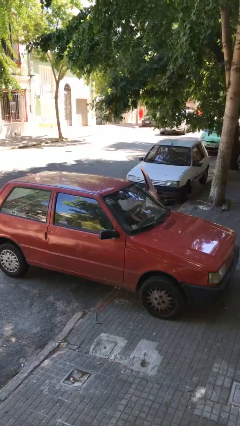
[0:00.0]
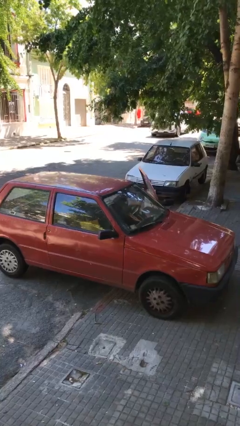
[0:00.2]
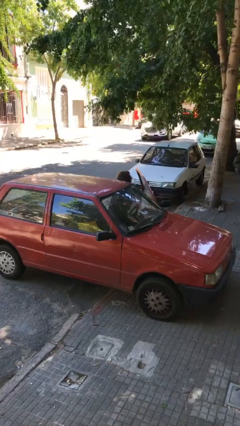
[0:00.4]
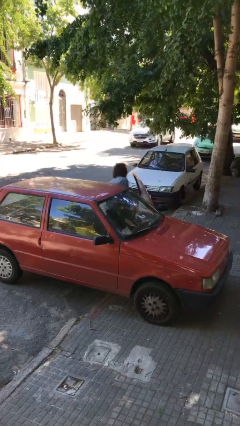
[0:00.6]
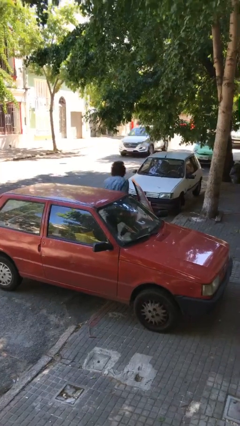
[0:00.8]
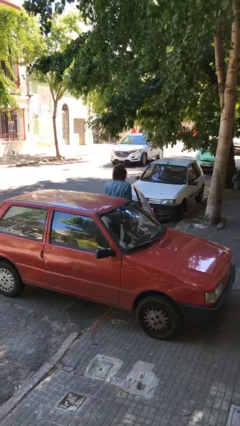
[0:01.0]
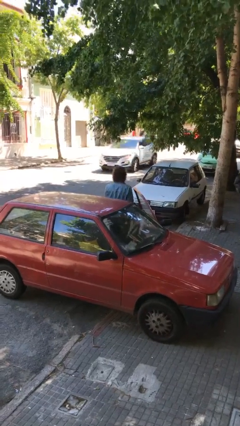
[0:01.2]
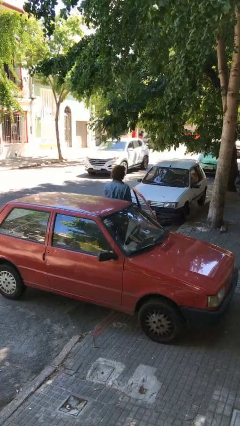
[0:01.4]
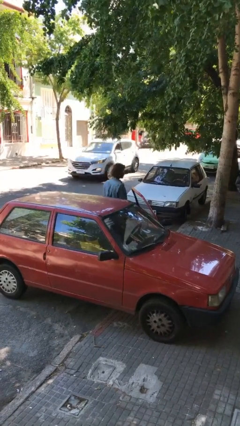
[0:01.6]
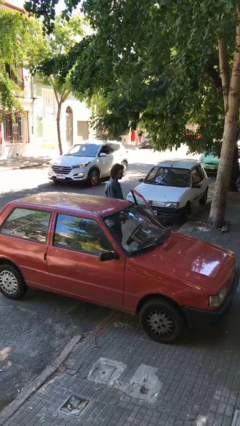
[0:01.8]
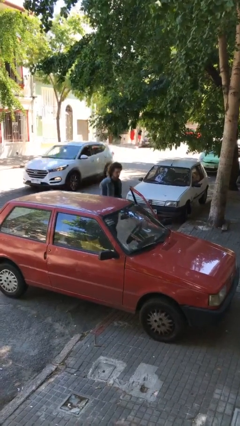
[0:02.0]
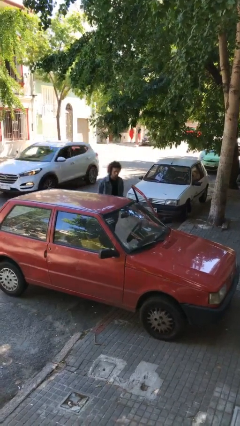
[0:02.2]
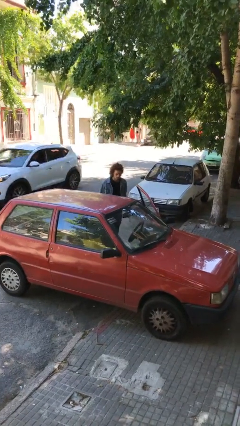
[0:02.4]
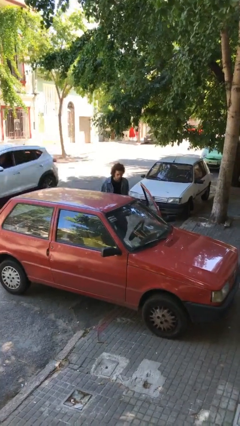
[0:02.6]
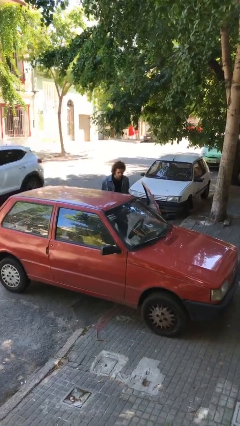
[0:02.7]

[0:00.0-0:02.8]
person exits car

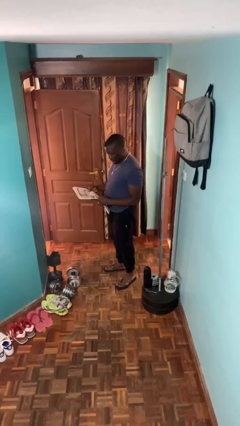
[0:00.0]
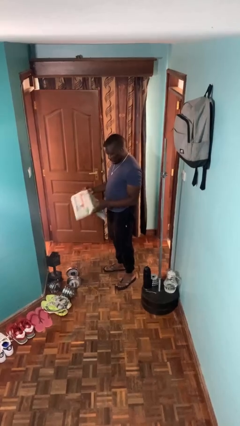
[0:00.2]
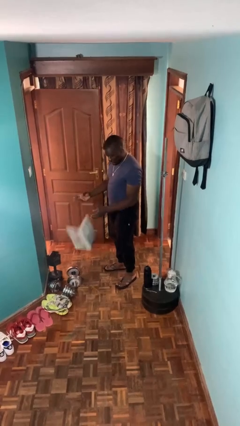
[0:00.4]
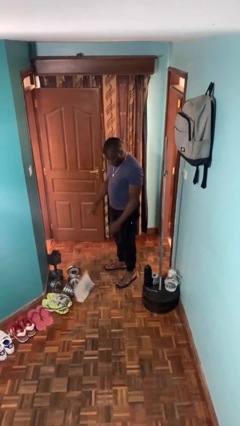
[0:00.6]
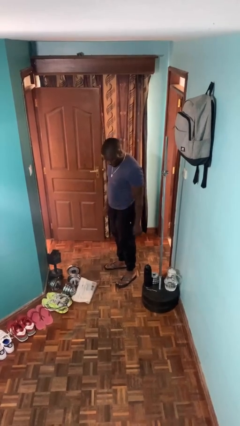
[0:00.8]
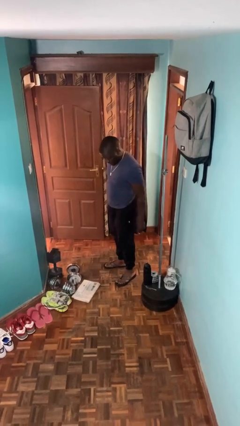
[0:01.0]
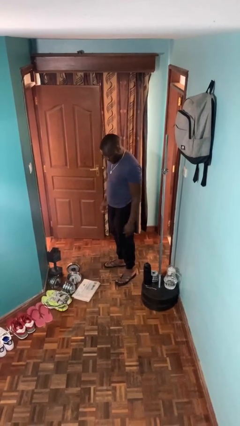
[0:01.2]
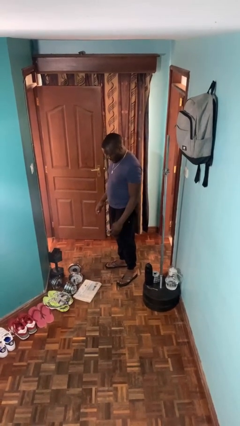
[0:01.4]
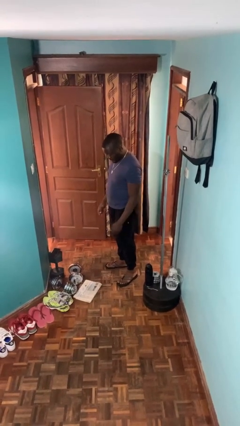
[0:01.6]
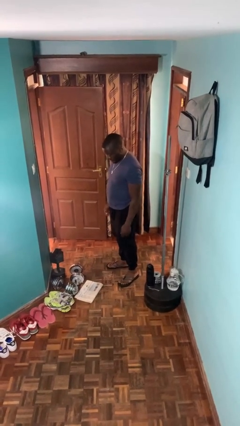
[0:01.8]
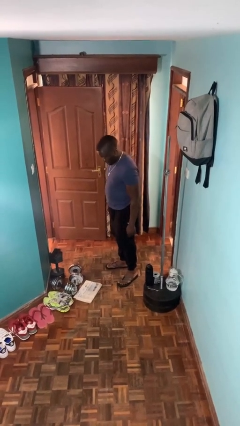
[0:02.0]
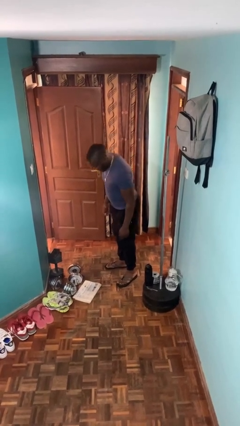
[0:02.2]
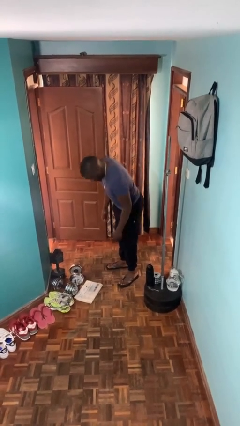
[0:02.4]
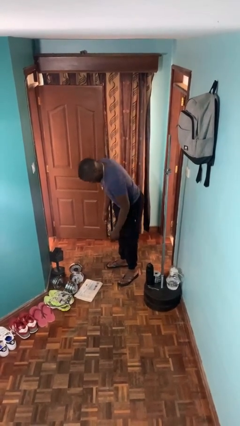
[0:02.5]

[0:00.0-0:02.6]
person drops object

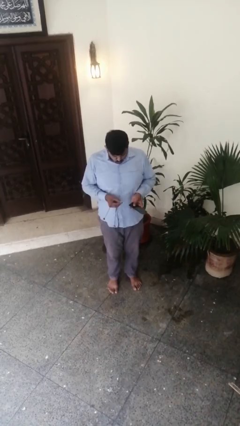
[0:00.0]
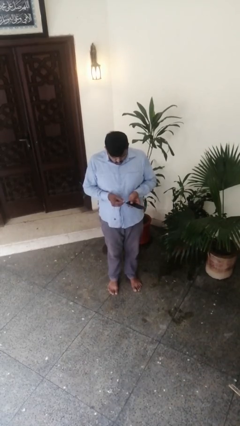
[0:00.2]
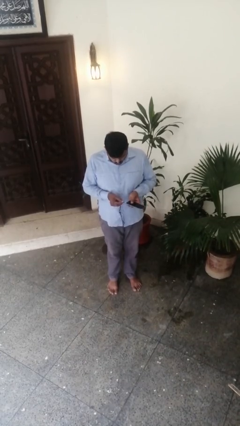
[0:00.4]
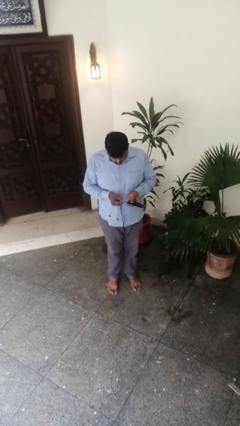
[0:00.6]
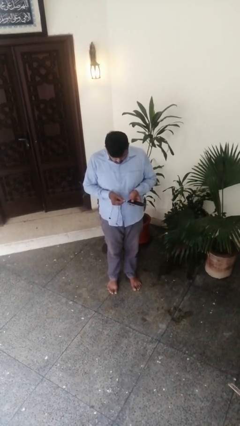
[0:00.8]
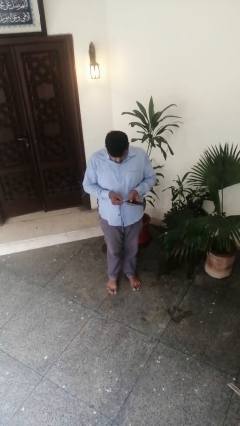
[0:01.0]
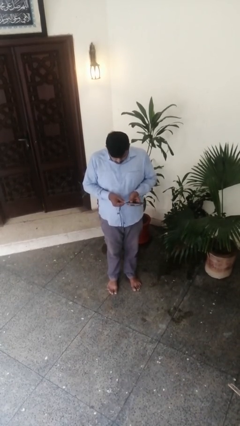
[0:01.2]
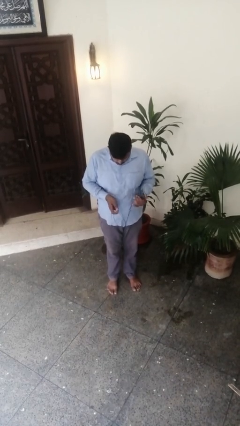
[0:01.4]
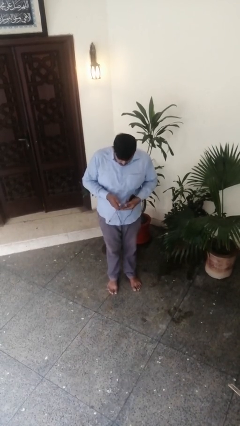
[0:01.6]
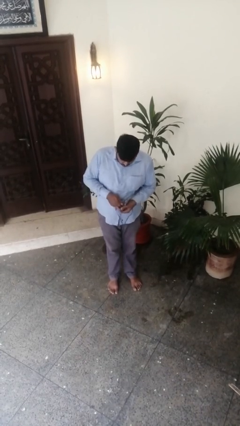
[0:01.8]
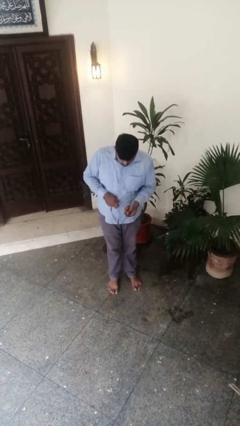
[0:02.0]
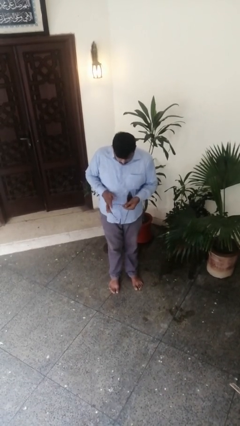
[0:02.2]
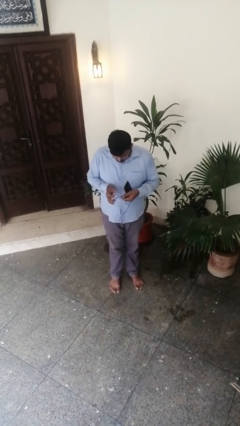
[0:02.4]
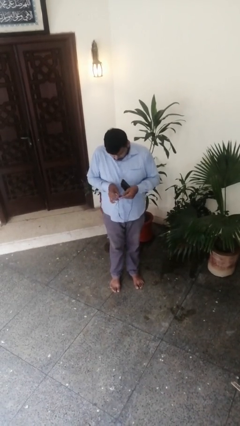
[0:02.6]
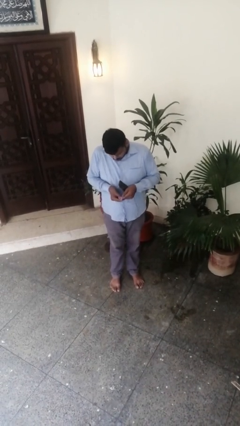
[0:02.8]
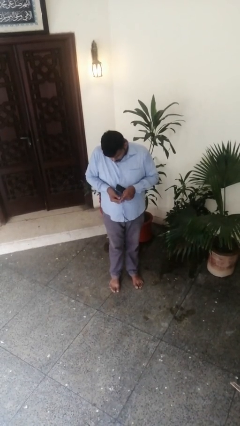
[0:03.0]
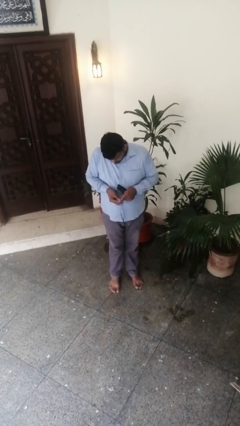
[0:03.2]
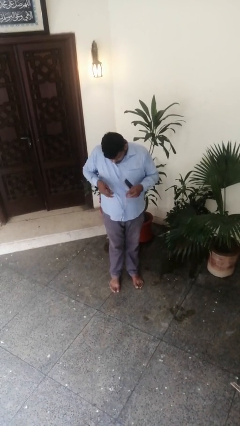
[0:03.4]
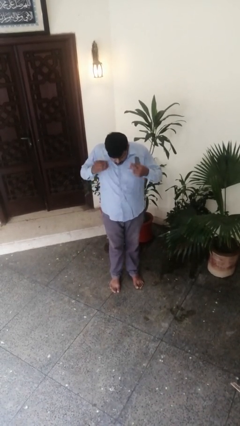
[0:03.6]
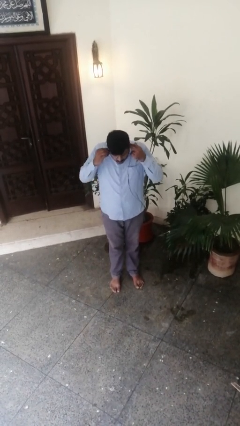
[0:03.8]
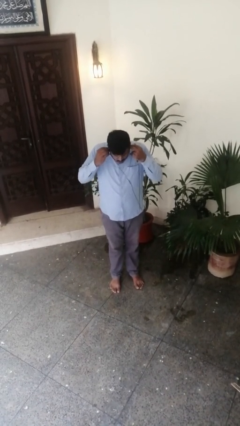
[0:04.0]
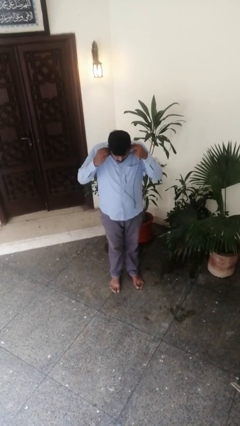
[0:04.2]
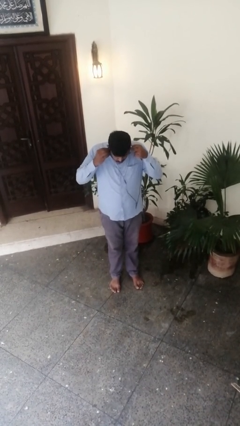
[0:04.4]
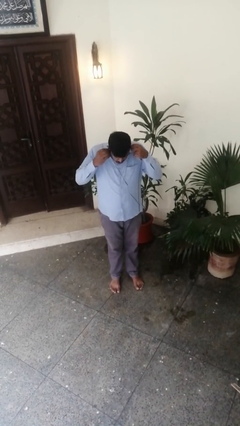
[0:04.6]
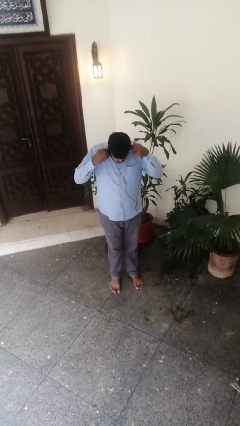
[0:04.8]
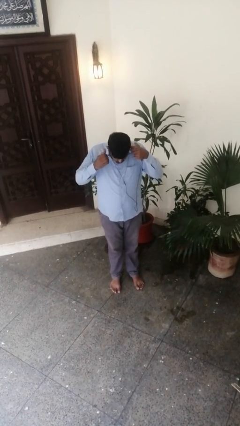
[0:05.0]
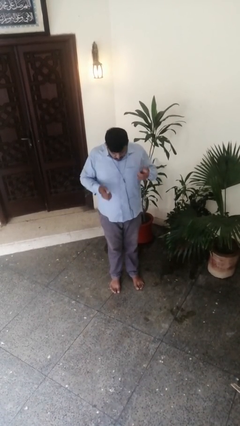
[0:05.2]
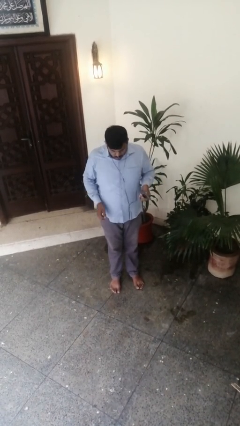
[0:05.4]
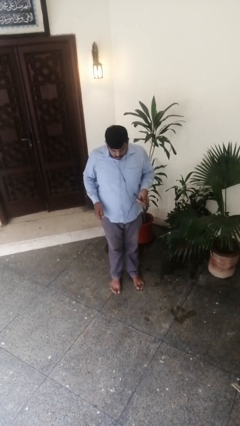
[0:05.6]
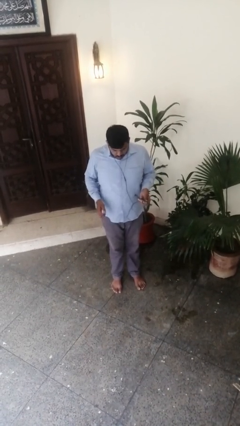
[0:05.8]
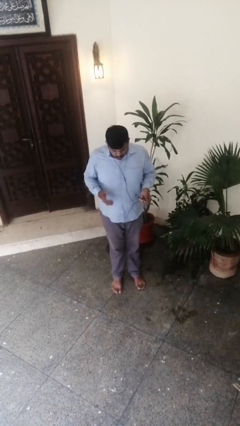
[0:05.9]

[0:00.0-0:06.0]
person puts on headphones

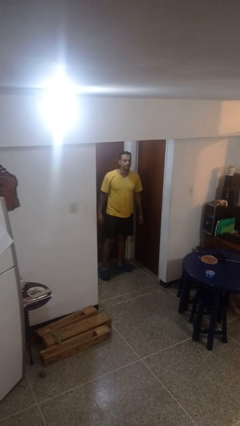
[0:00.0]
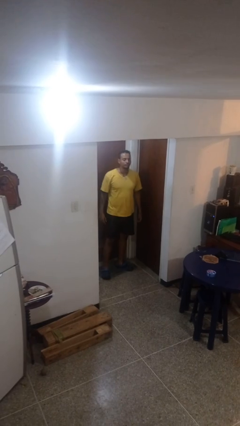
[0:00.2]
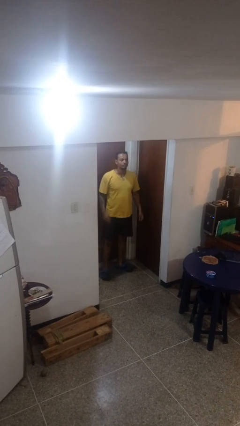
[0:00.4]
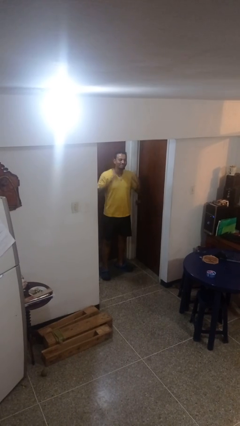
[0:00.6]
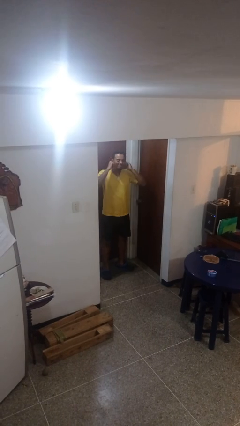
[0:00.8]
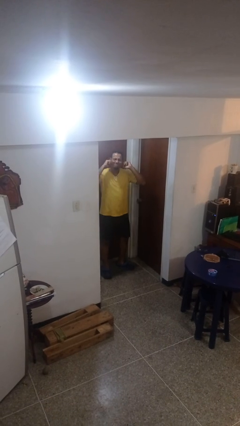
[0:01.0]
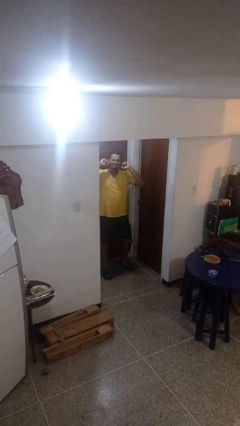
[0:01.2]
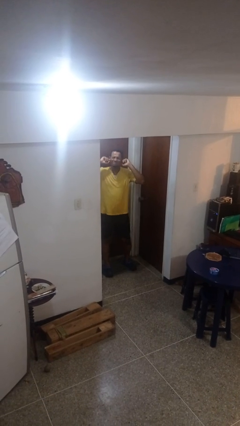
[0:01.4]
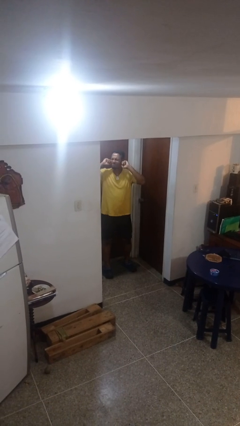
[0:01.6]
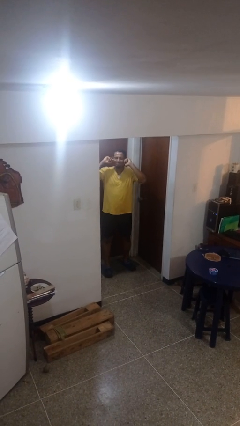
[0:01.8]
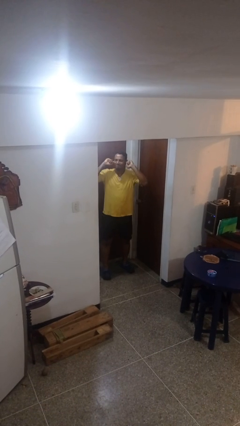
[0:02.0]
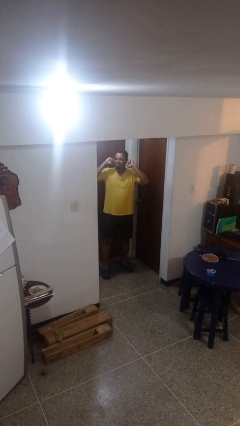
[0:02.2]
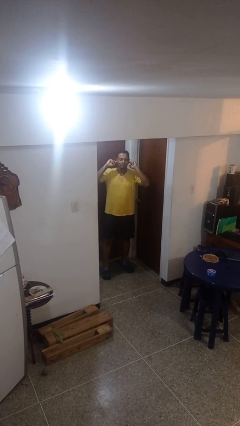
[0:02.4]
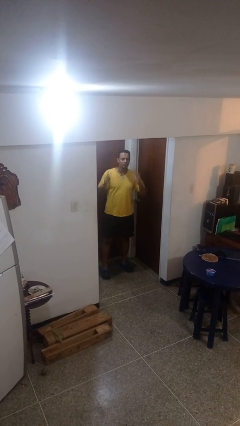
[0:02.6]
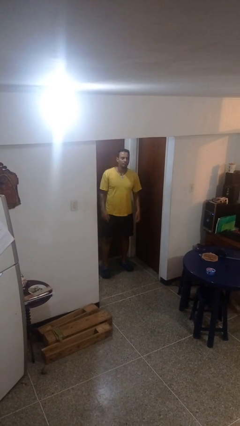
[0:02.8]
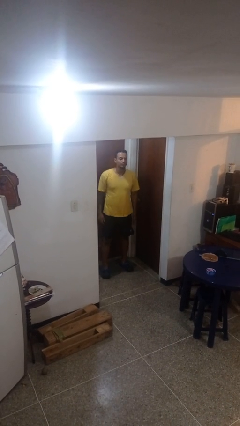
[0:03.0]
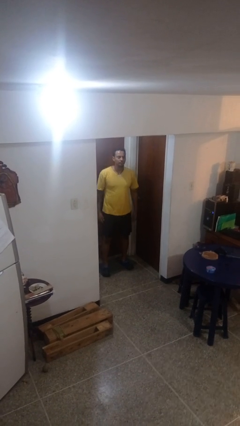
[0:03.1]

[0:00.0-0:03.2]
person puts fingers in ear

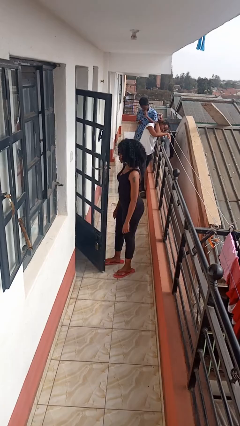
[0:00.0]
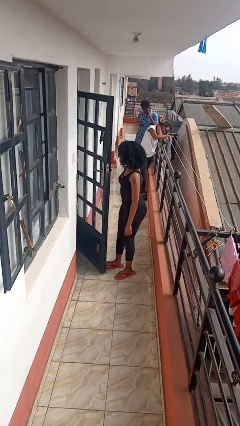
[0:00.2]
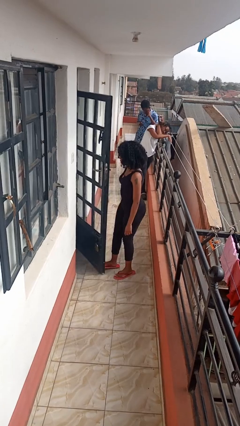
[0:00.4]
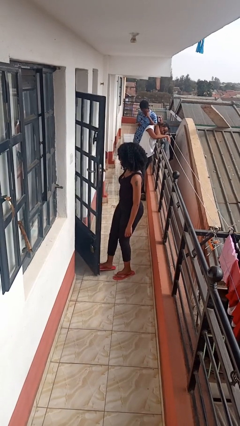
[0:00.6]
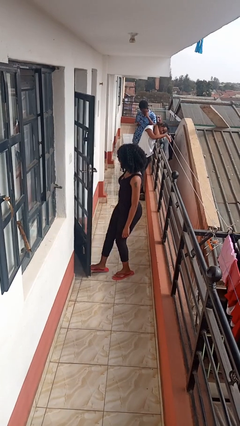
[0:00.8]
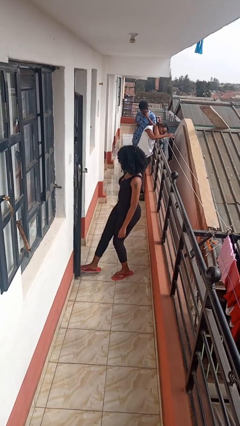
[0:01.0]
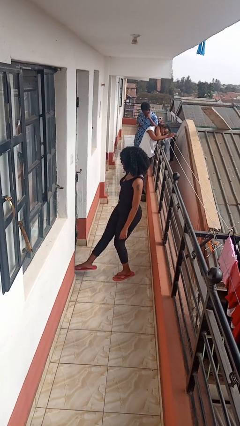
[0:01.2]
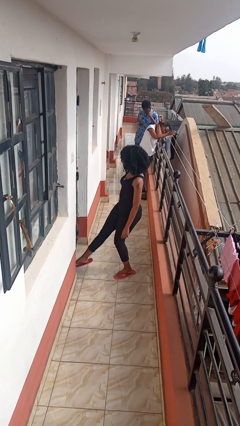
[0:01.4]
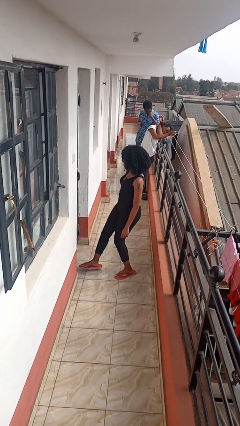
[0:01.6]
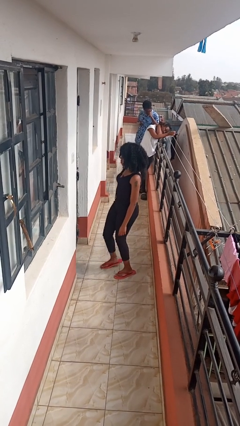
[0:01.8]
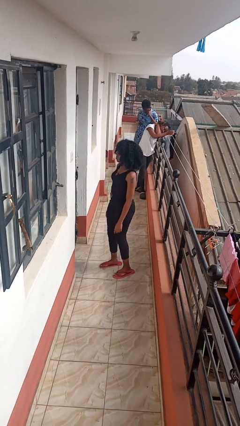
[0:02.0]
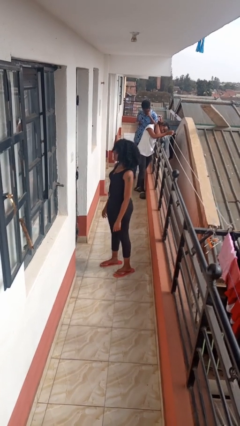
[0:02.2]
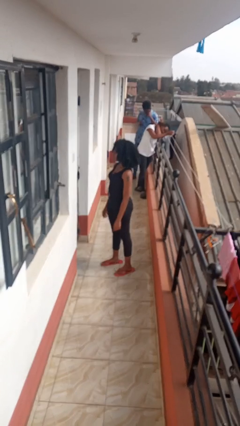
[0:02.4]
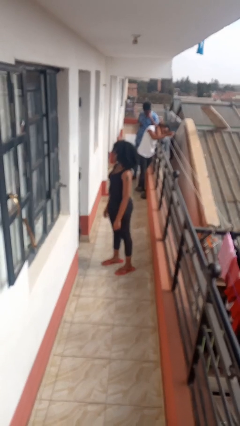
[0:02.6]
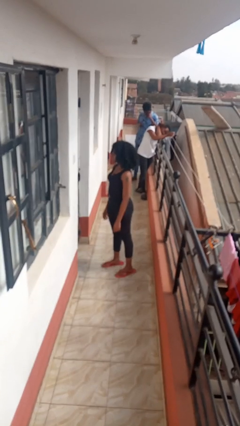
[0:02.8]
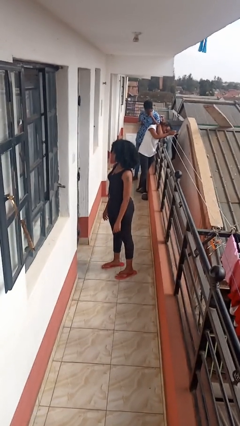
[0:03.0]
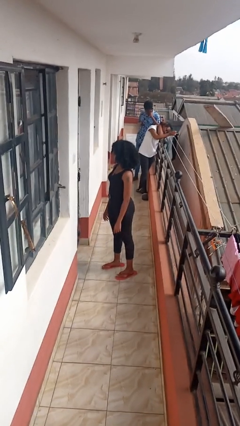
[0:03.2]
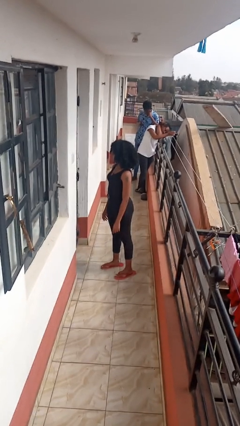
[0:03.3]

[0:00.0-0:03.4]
person closes door with foot
